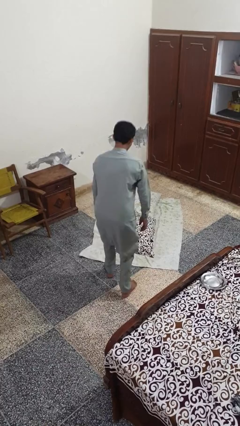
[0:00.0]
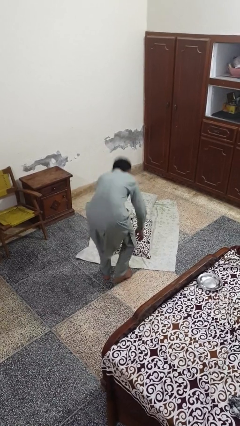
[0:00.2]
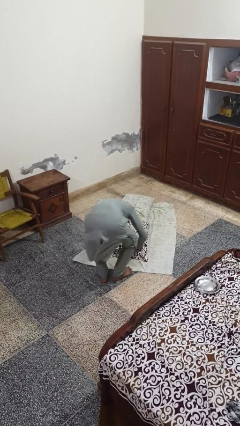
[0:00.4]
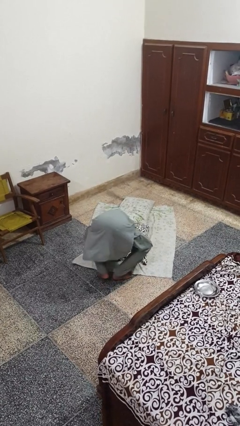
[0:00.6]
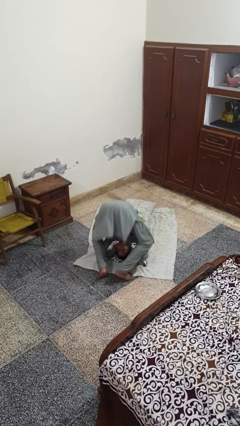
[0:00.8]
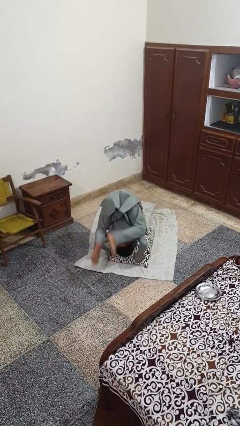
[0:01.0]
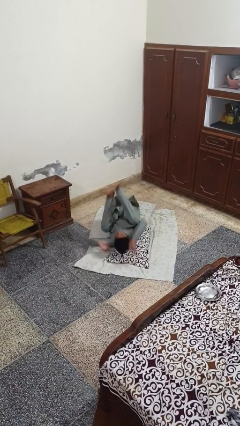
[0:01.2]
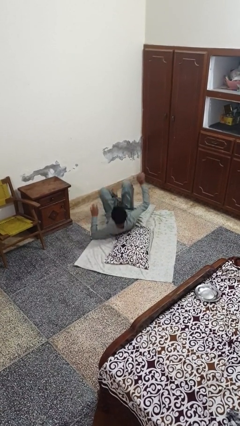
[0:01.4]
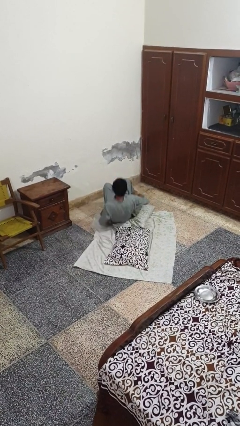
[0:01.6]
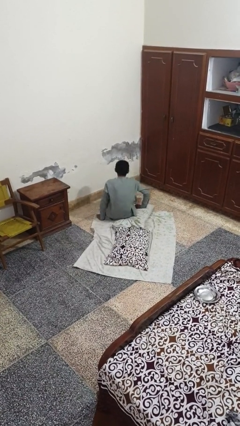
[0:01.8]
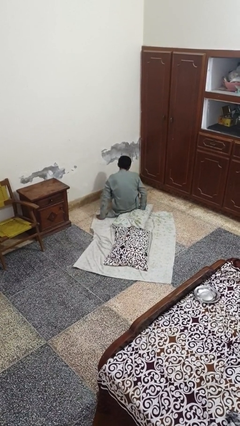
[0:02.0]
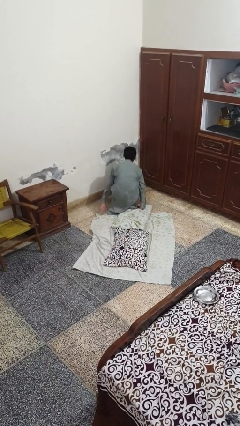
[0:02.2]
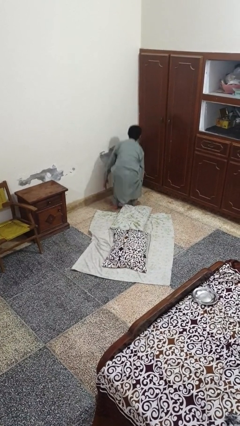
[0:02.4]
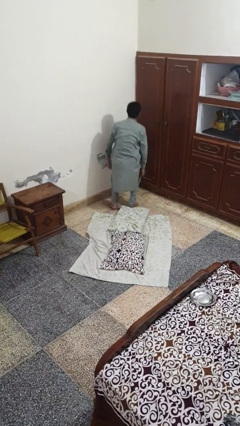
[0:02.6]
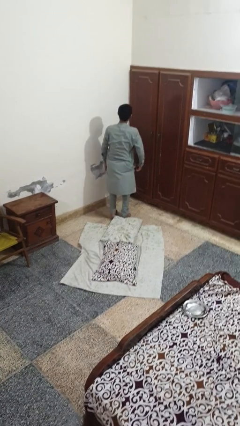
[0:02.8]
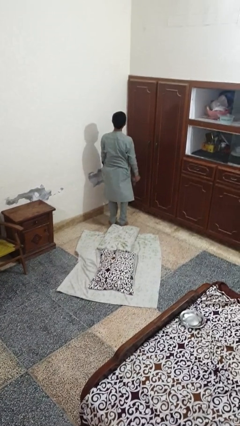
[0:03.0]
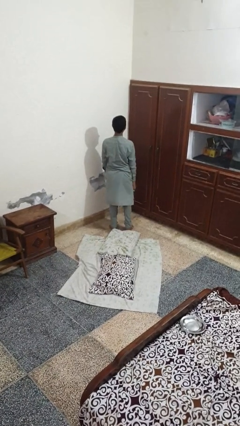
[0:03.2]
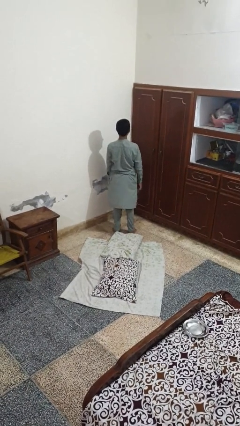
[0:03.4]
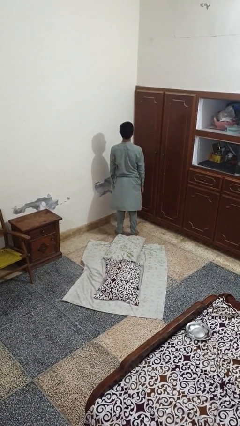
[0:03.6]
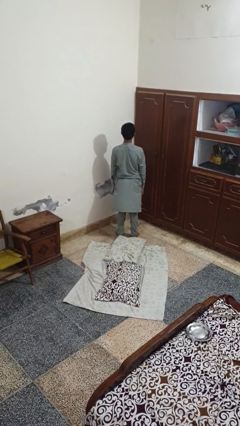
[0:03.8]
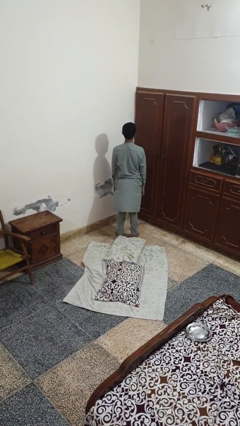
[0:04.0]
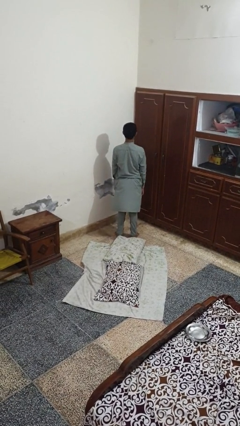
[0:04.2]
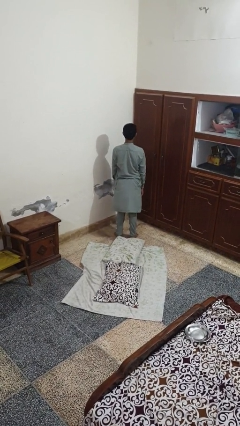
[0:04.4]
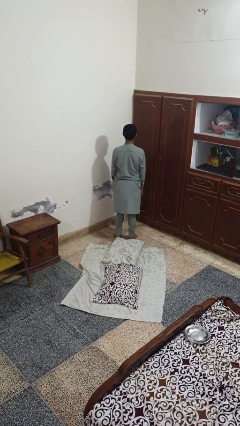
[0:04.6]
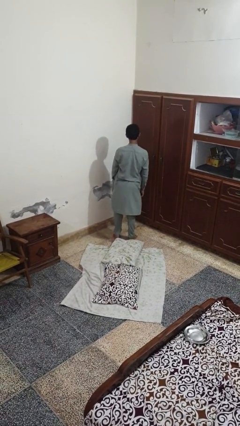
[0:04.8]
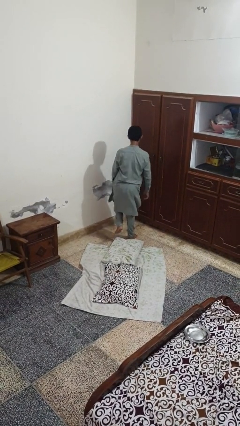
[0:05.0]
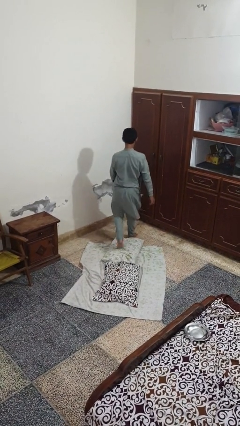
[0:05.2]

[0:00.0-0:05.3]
person somersaults

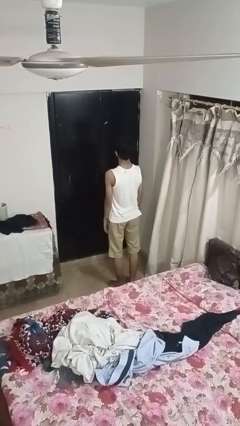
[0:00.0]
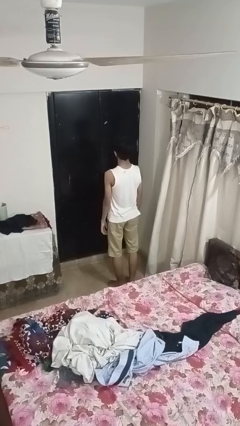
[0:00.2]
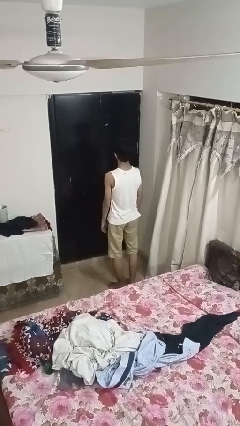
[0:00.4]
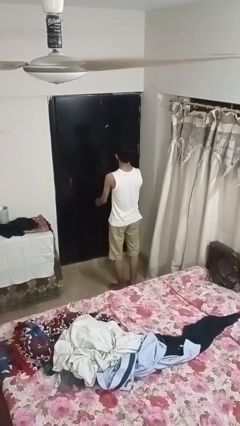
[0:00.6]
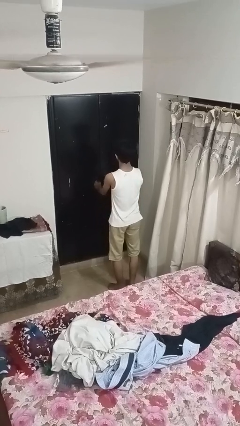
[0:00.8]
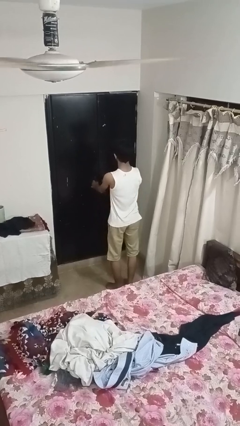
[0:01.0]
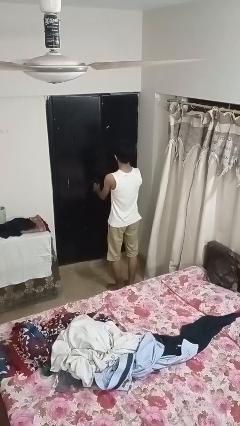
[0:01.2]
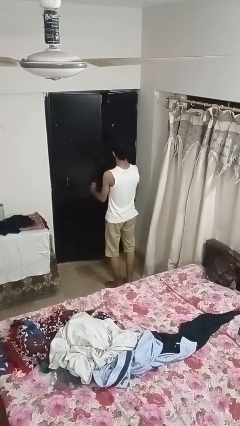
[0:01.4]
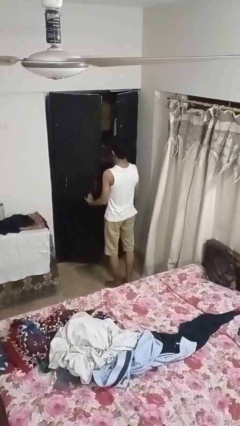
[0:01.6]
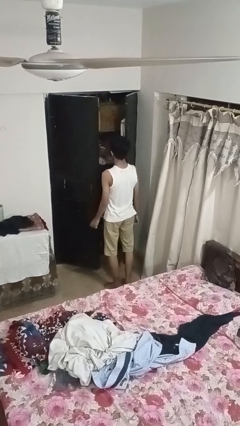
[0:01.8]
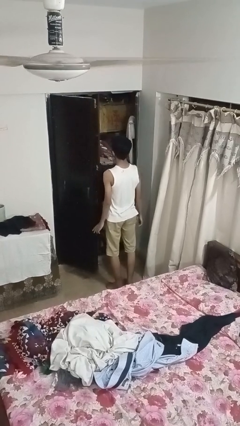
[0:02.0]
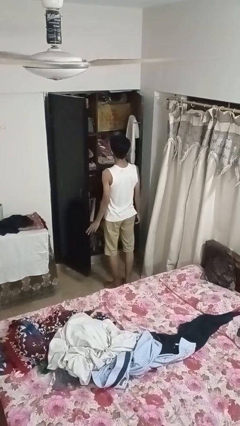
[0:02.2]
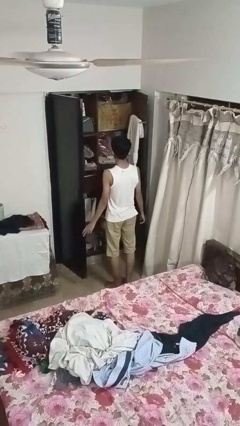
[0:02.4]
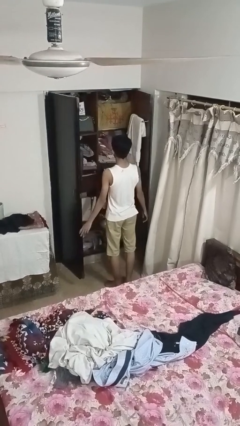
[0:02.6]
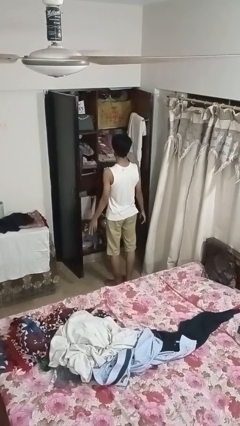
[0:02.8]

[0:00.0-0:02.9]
person opens closet door

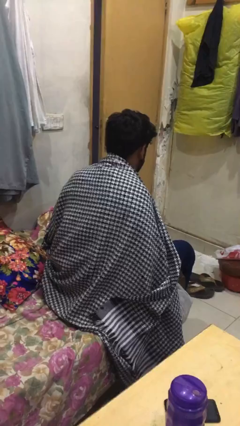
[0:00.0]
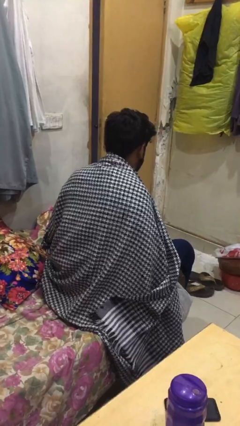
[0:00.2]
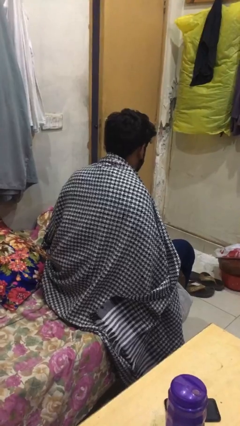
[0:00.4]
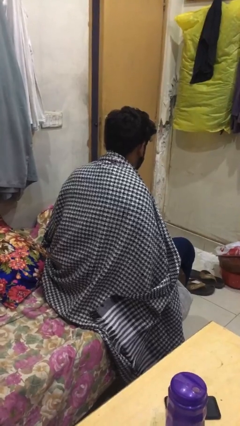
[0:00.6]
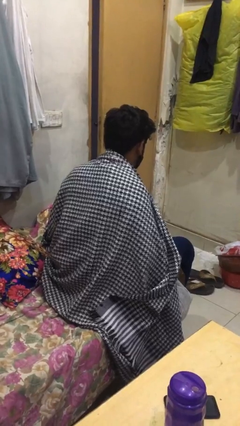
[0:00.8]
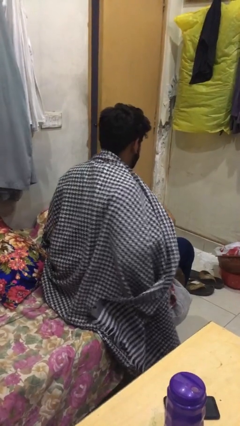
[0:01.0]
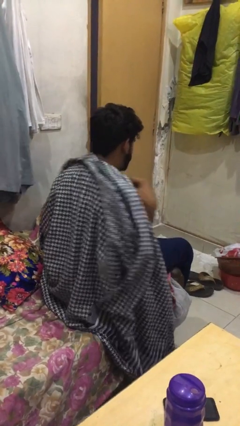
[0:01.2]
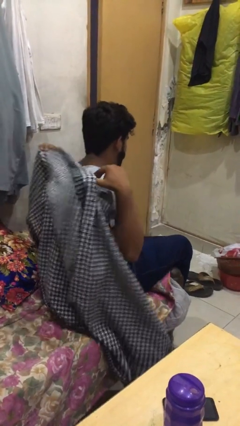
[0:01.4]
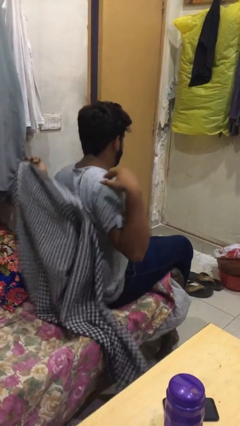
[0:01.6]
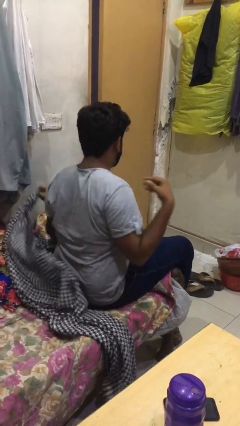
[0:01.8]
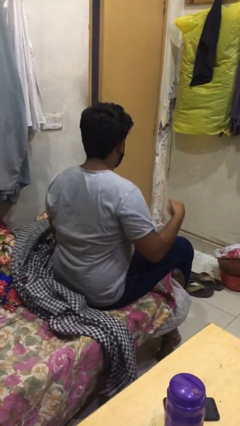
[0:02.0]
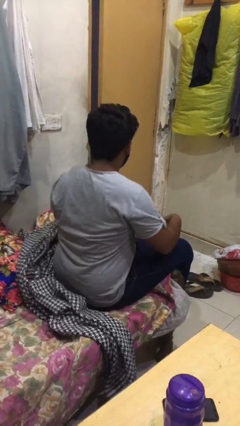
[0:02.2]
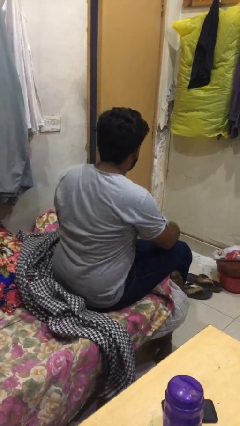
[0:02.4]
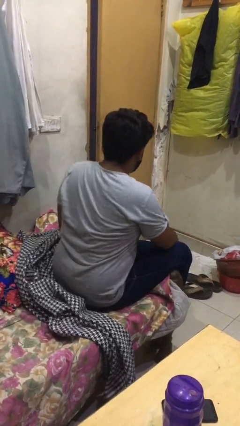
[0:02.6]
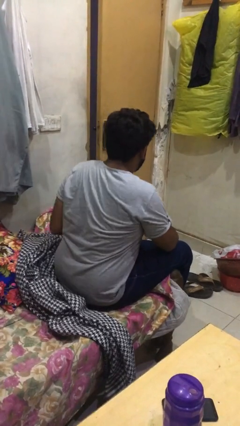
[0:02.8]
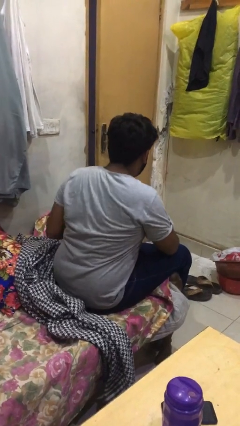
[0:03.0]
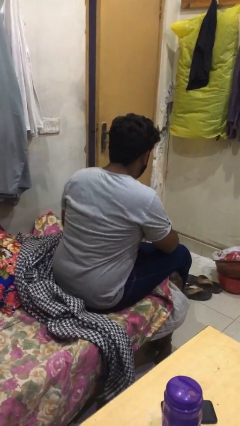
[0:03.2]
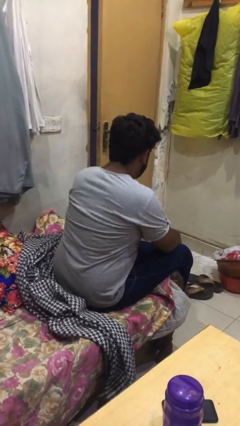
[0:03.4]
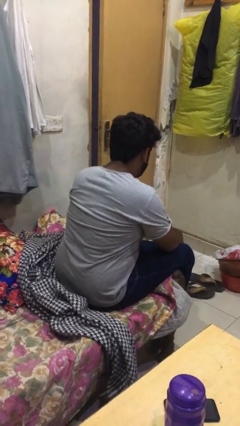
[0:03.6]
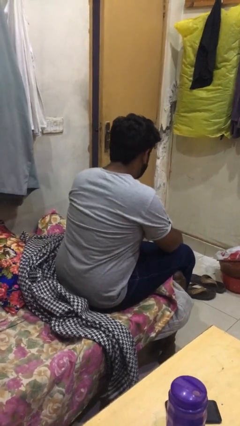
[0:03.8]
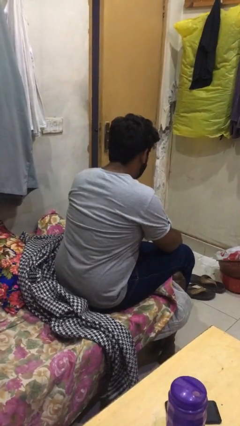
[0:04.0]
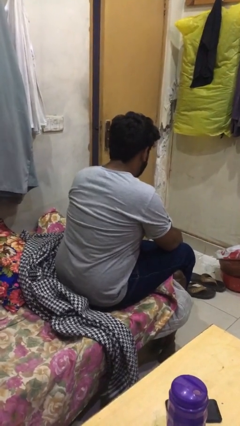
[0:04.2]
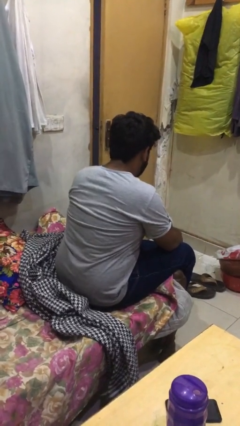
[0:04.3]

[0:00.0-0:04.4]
person uncovers with blanket

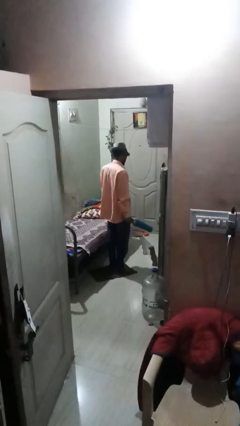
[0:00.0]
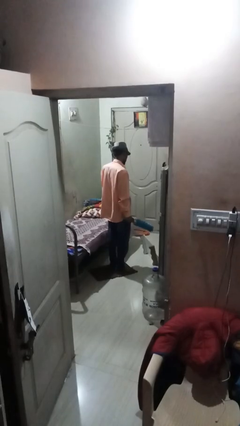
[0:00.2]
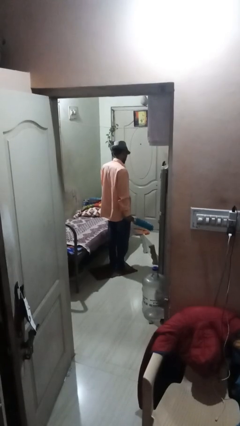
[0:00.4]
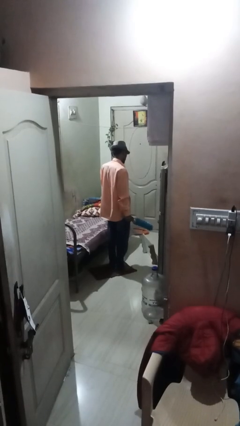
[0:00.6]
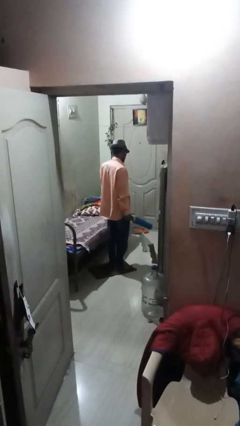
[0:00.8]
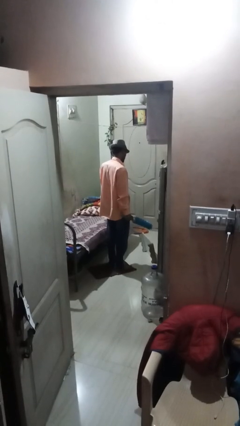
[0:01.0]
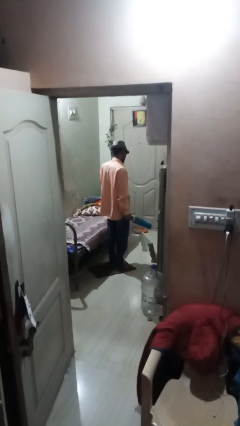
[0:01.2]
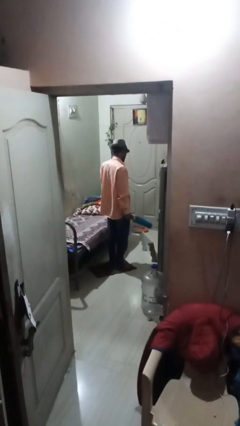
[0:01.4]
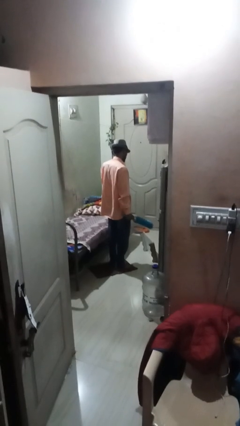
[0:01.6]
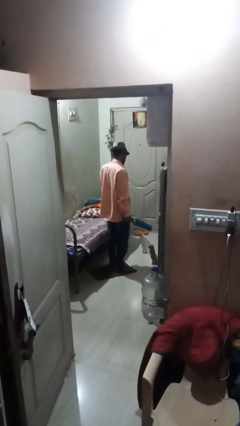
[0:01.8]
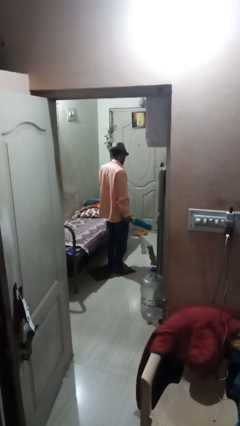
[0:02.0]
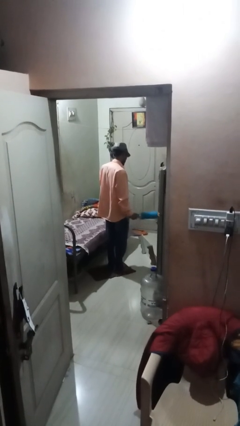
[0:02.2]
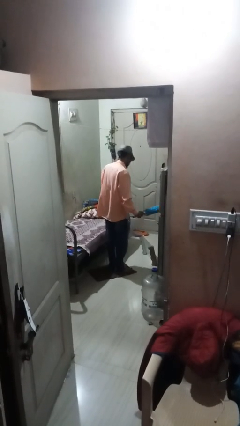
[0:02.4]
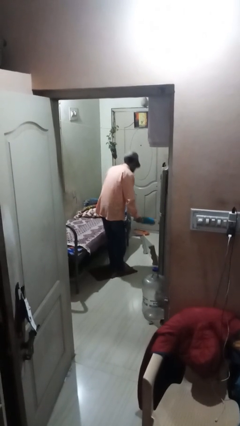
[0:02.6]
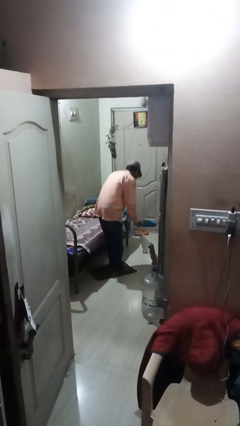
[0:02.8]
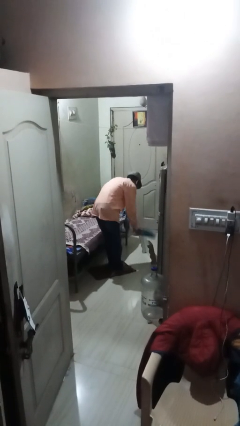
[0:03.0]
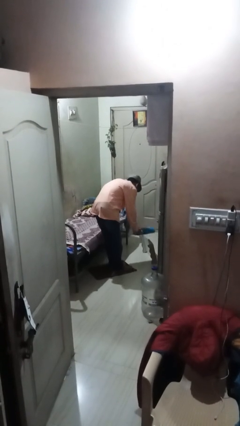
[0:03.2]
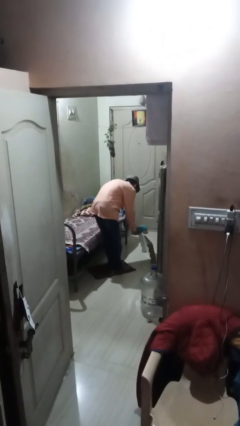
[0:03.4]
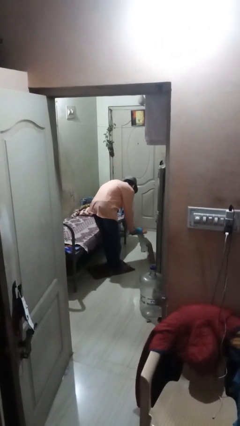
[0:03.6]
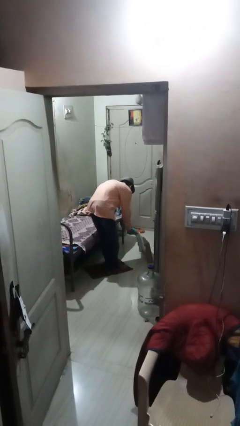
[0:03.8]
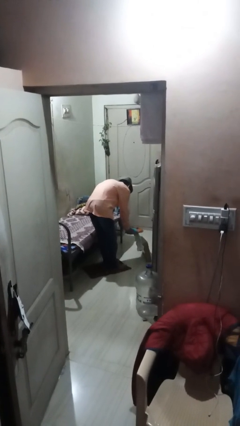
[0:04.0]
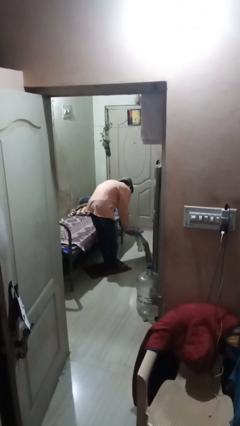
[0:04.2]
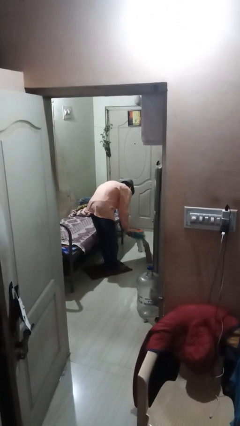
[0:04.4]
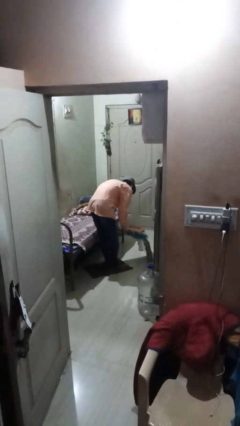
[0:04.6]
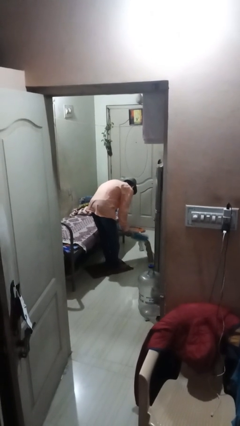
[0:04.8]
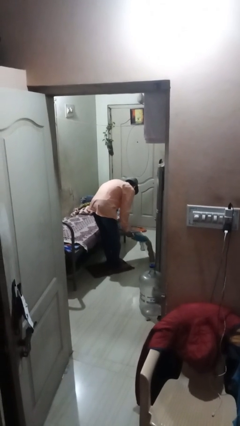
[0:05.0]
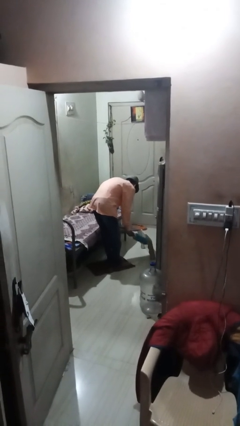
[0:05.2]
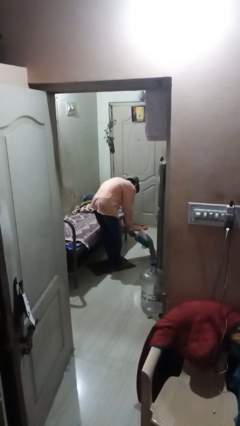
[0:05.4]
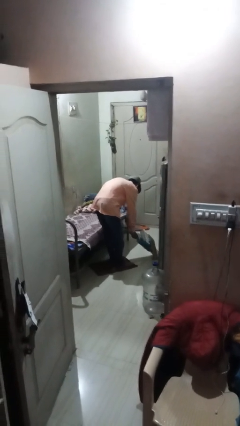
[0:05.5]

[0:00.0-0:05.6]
person dusts furniture
